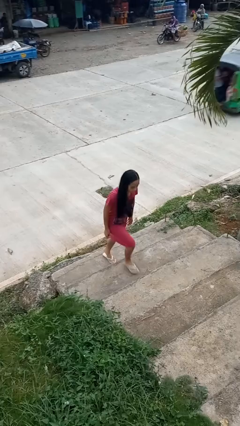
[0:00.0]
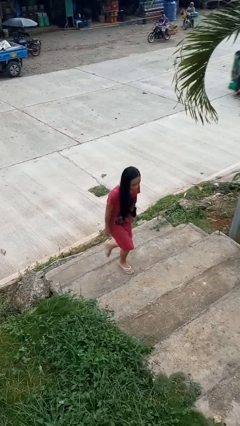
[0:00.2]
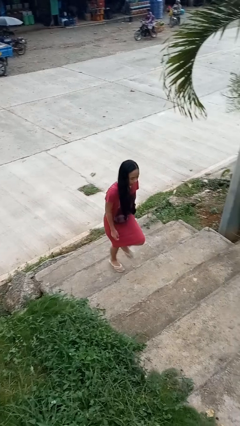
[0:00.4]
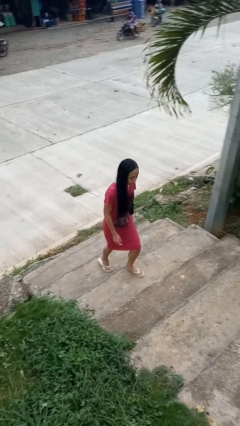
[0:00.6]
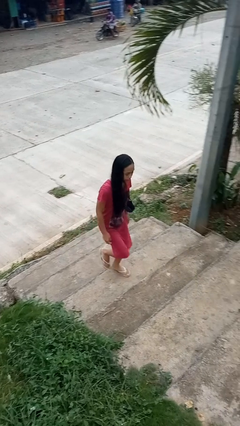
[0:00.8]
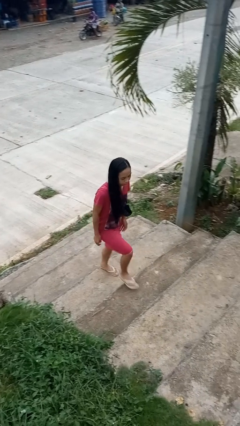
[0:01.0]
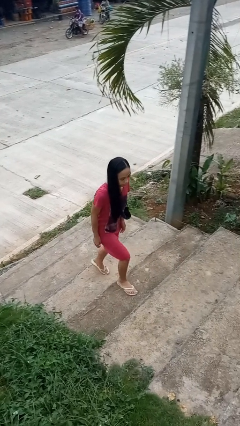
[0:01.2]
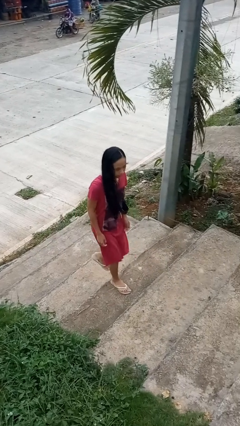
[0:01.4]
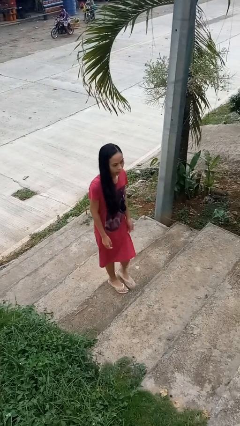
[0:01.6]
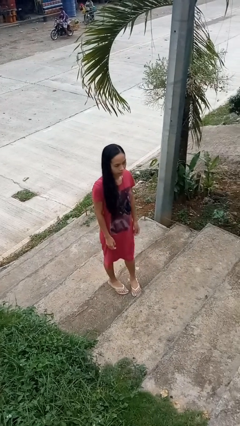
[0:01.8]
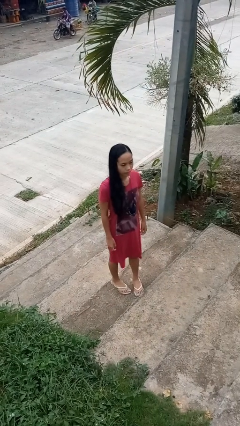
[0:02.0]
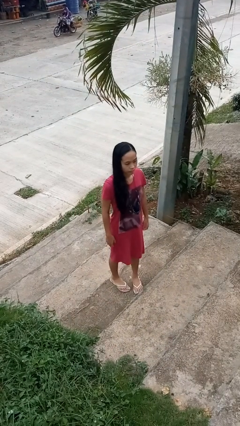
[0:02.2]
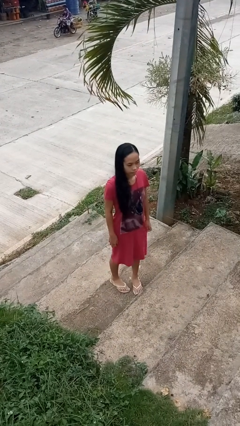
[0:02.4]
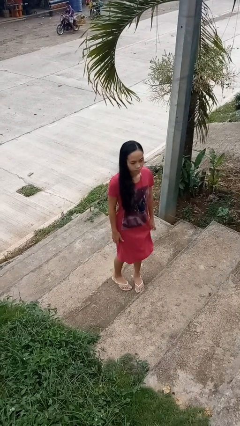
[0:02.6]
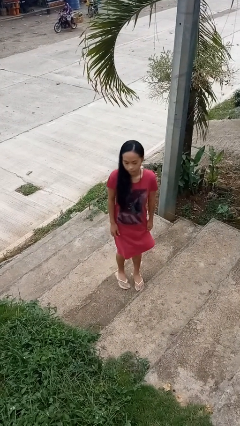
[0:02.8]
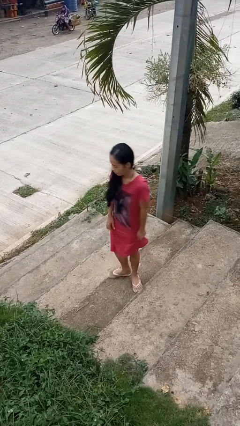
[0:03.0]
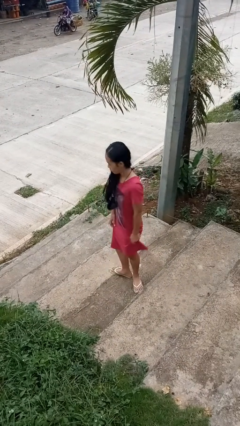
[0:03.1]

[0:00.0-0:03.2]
person climbs up stairs

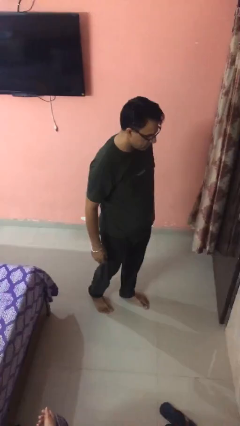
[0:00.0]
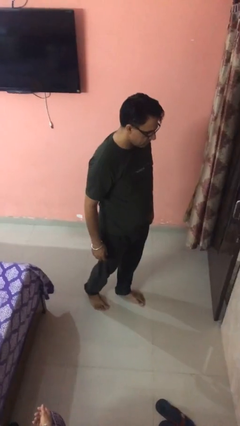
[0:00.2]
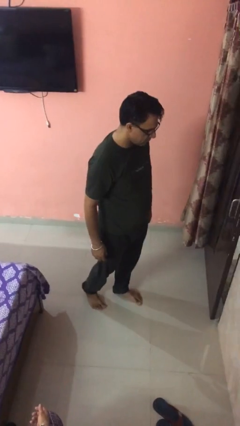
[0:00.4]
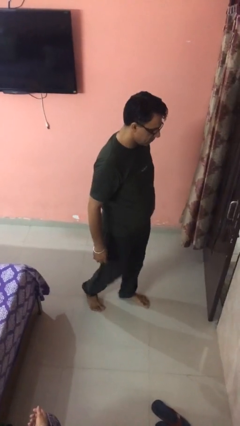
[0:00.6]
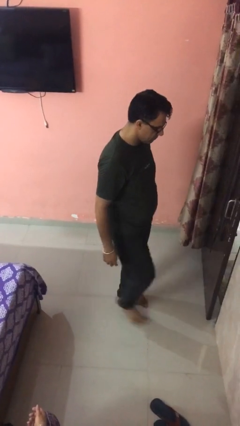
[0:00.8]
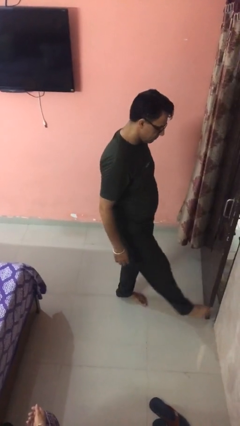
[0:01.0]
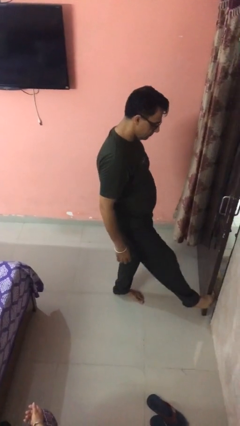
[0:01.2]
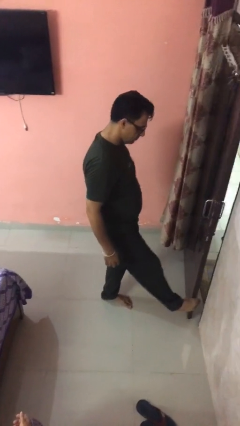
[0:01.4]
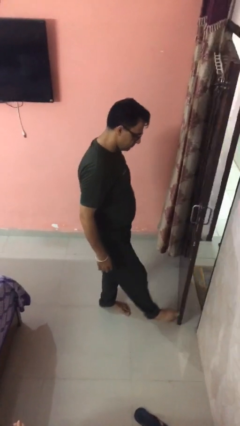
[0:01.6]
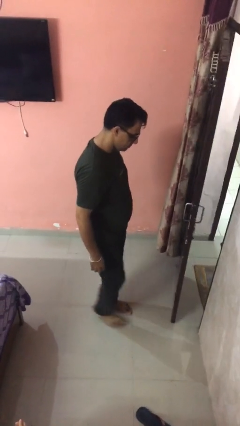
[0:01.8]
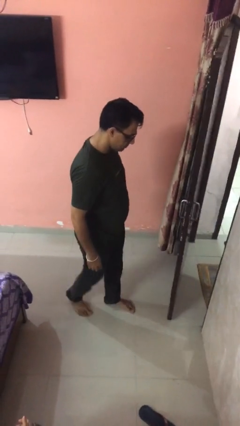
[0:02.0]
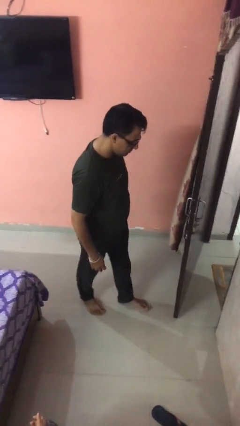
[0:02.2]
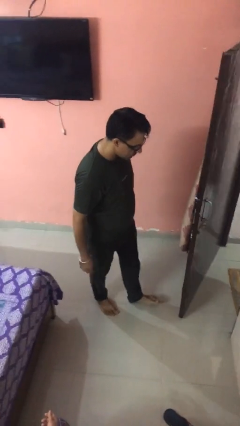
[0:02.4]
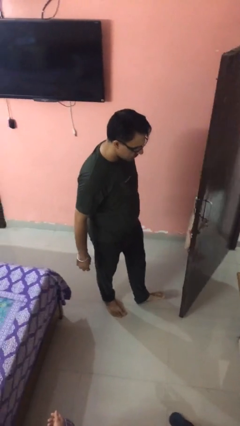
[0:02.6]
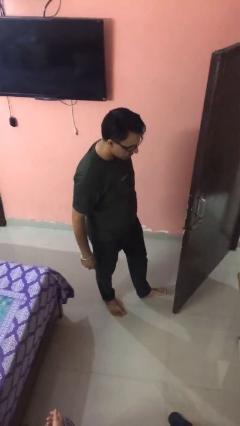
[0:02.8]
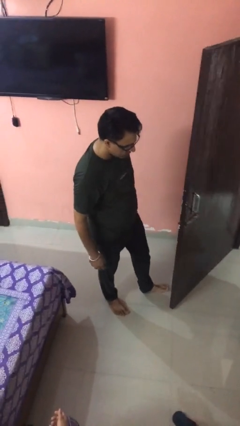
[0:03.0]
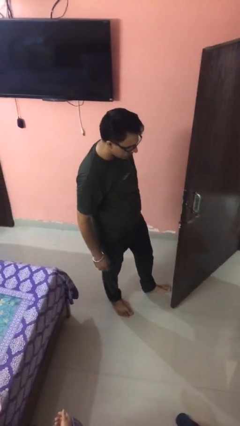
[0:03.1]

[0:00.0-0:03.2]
person opens facility door

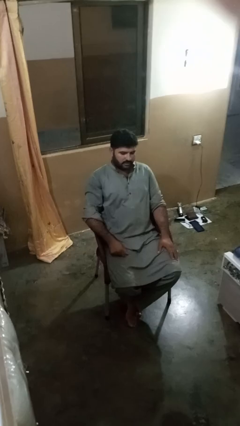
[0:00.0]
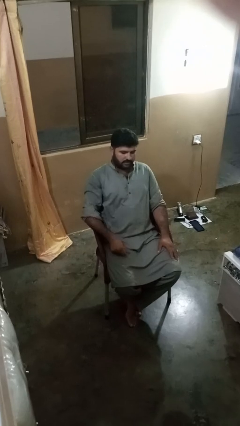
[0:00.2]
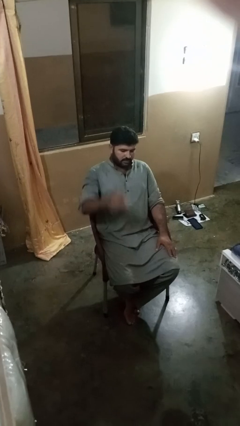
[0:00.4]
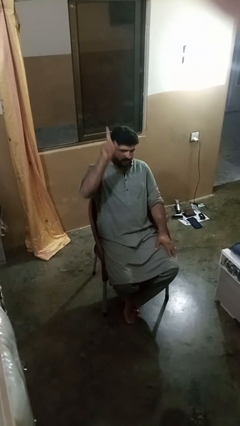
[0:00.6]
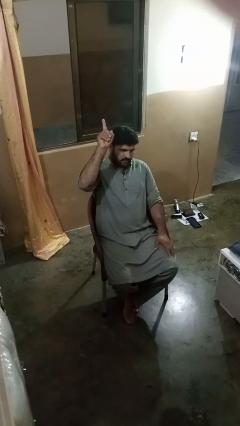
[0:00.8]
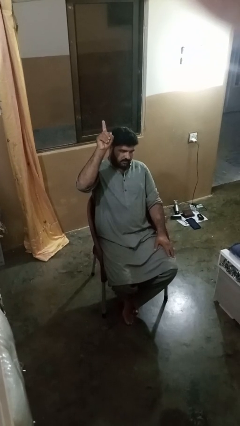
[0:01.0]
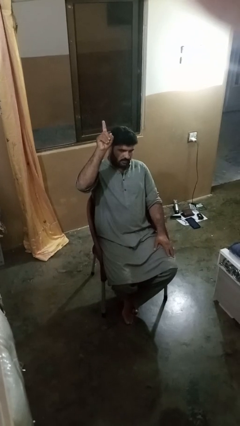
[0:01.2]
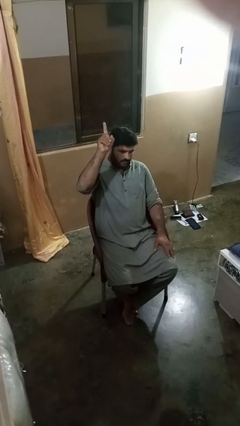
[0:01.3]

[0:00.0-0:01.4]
person gestures number one

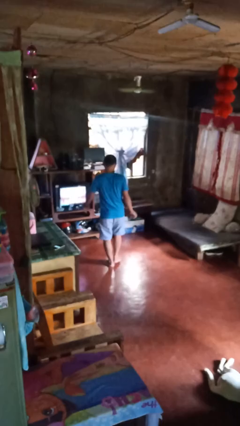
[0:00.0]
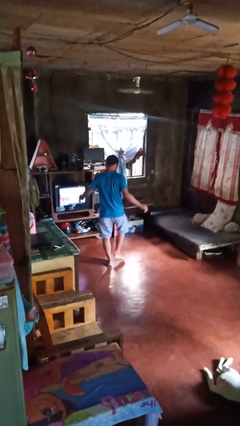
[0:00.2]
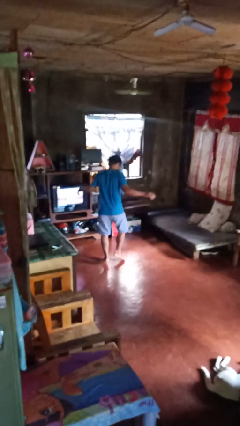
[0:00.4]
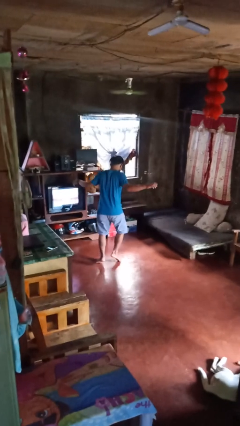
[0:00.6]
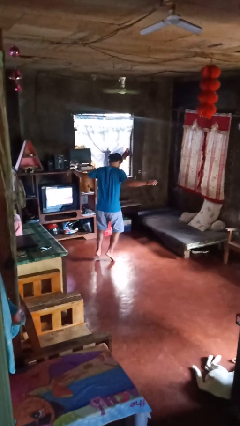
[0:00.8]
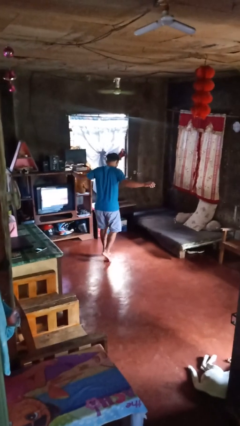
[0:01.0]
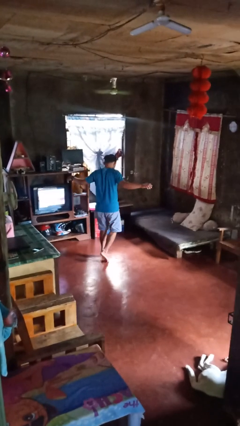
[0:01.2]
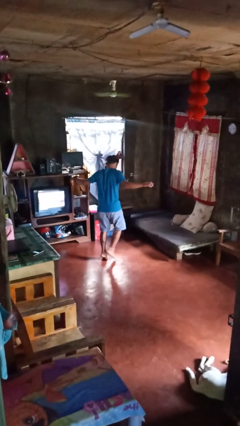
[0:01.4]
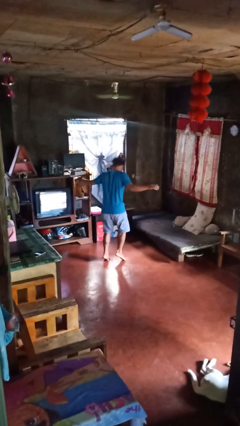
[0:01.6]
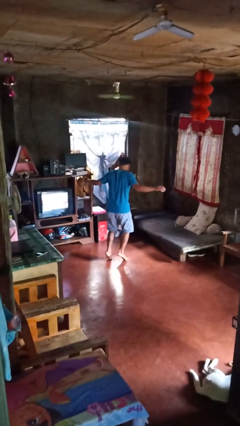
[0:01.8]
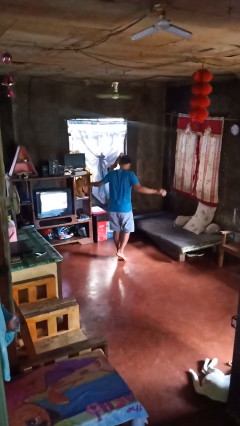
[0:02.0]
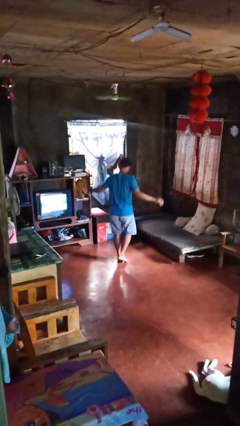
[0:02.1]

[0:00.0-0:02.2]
person walks tiptoe

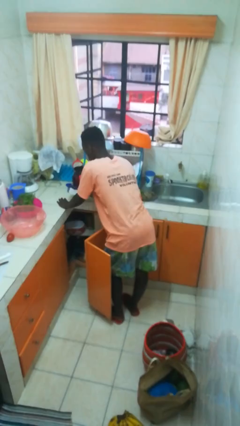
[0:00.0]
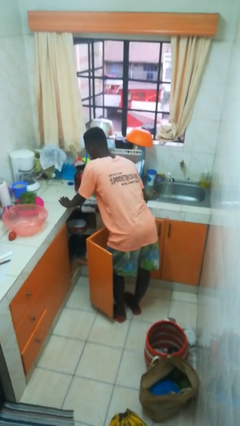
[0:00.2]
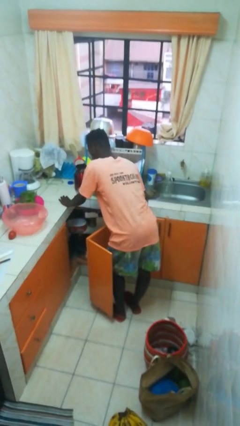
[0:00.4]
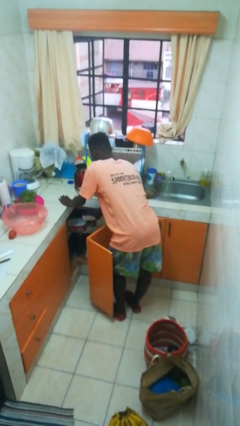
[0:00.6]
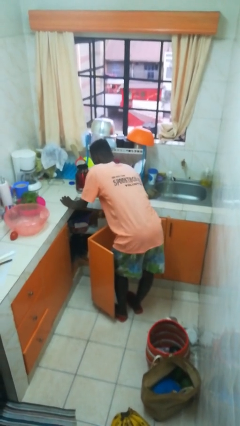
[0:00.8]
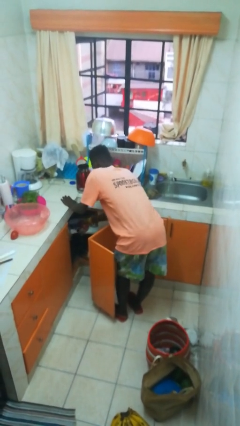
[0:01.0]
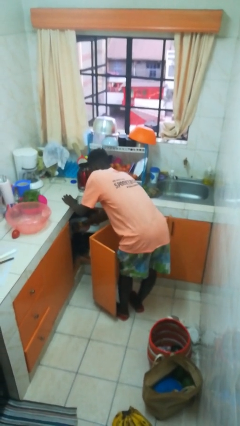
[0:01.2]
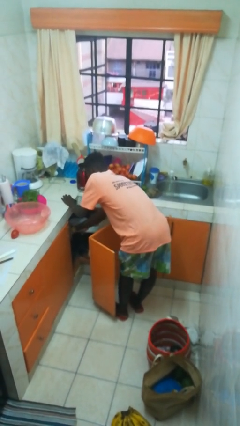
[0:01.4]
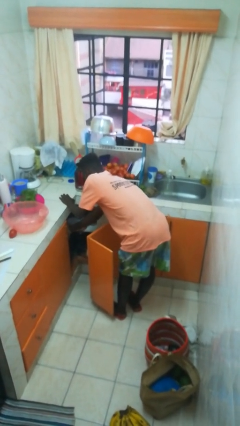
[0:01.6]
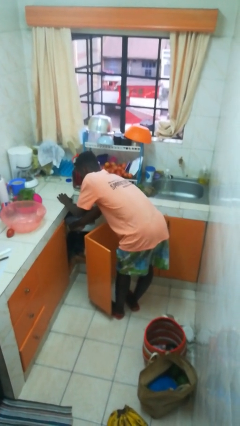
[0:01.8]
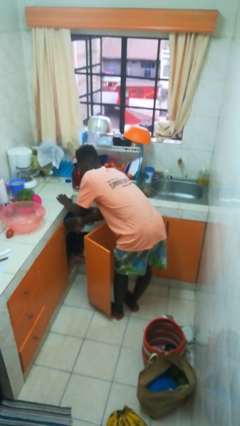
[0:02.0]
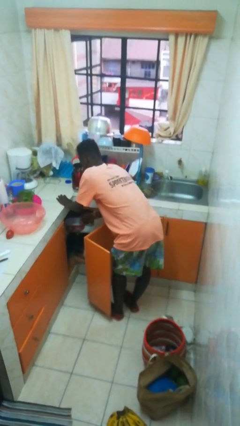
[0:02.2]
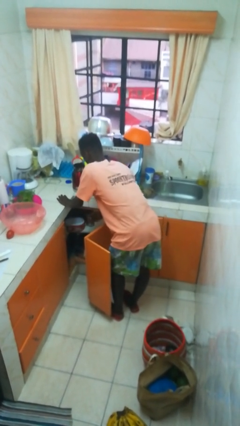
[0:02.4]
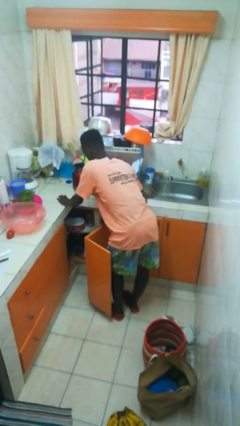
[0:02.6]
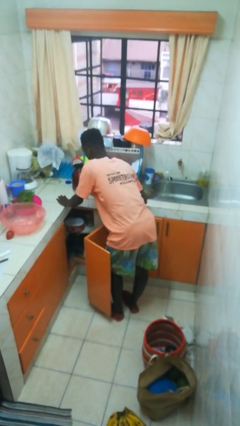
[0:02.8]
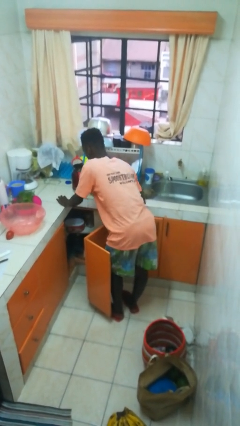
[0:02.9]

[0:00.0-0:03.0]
person puts object in cabinet

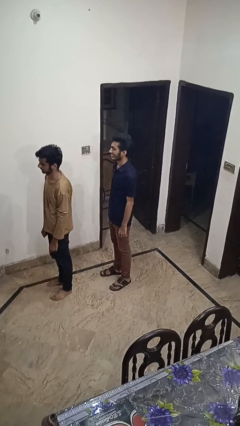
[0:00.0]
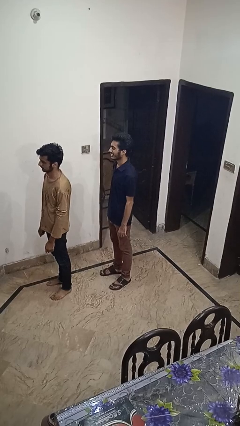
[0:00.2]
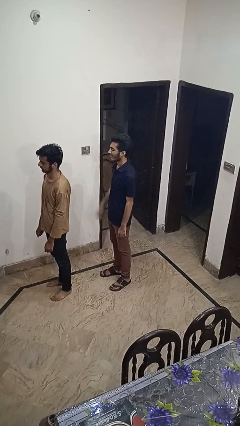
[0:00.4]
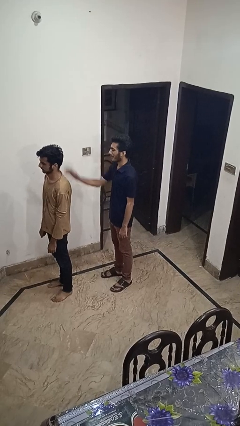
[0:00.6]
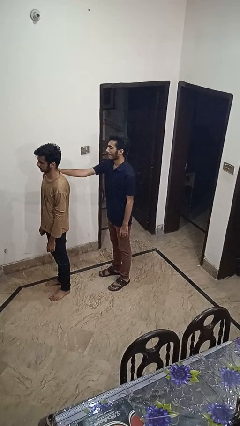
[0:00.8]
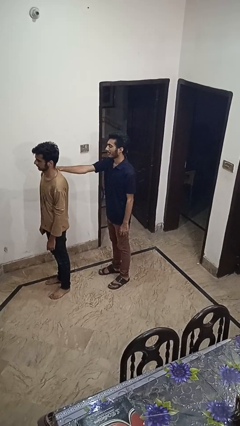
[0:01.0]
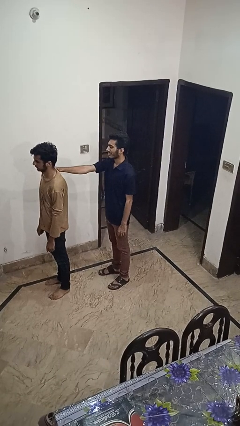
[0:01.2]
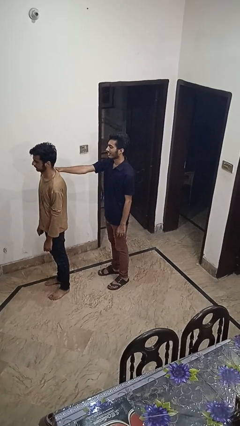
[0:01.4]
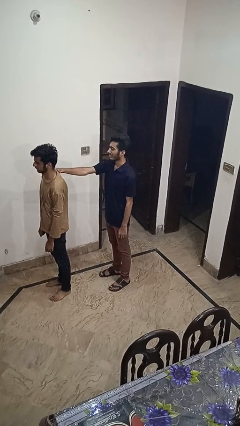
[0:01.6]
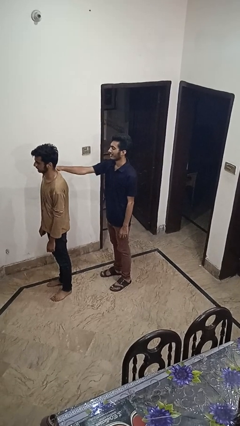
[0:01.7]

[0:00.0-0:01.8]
person grabs person by shoulder

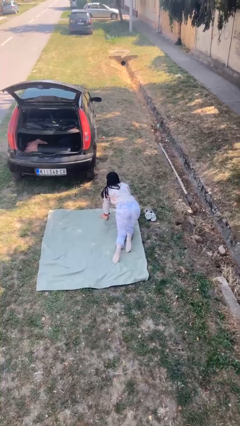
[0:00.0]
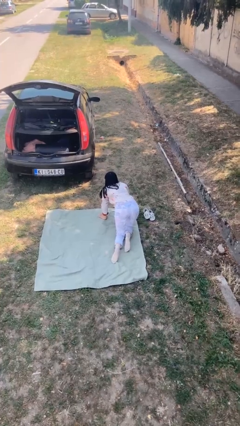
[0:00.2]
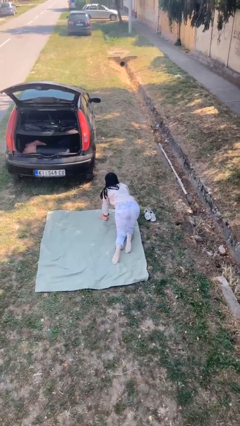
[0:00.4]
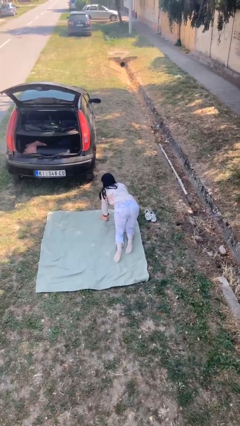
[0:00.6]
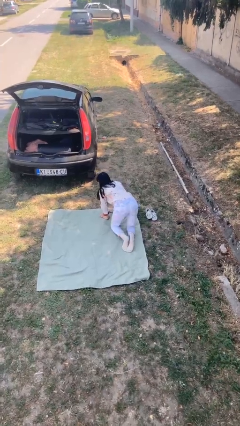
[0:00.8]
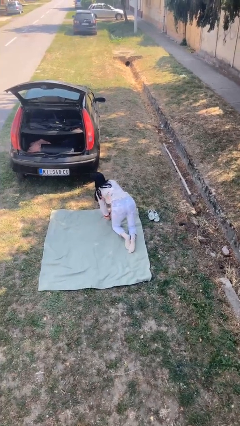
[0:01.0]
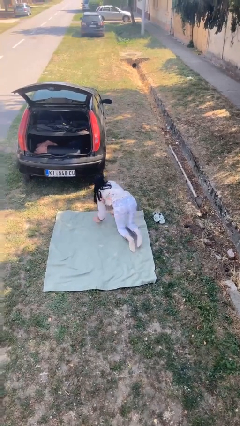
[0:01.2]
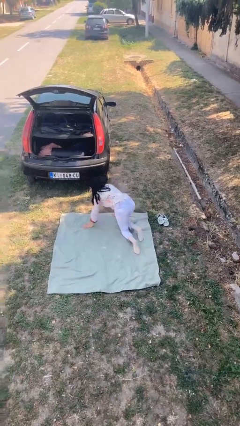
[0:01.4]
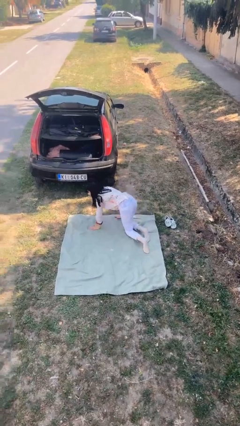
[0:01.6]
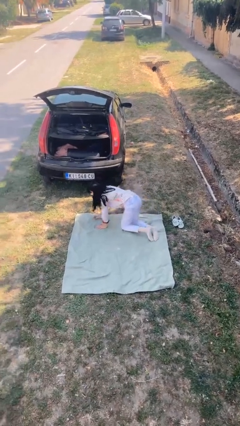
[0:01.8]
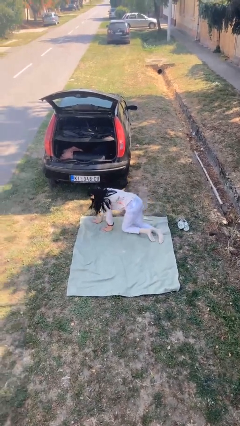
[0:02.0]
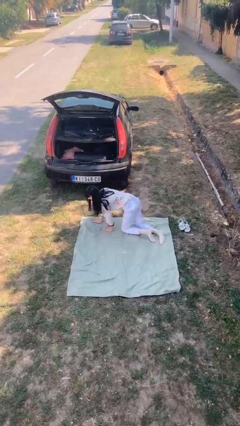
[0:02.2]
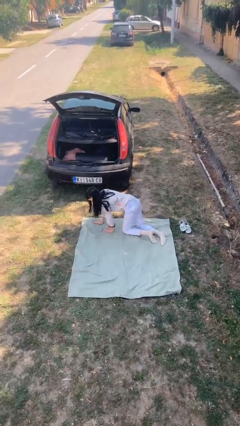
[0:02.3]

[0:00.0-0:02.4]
person crawls
